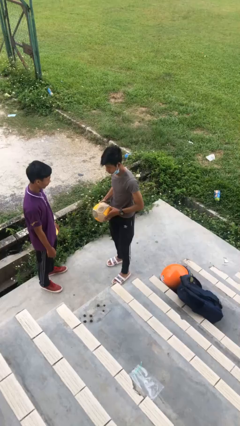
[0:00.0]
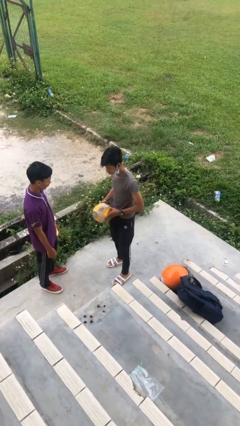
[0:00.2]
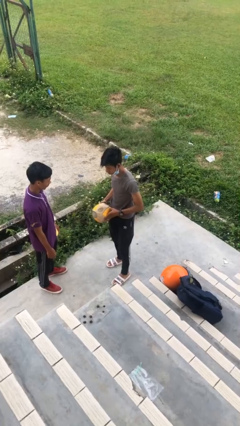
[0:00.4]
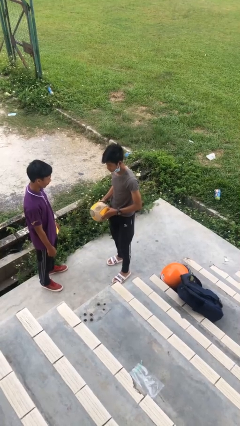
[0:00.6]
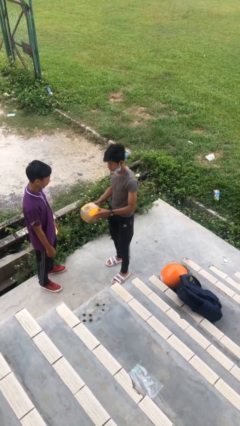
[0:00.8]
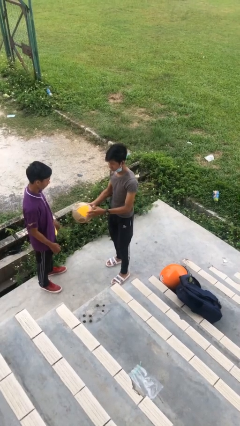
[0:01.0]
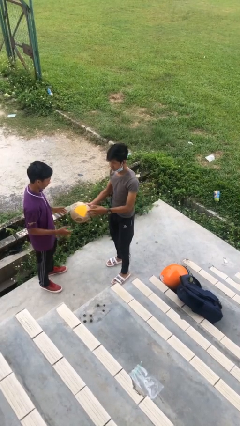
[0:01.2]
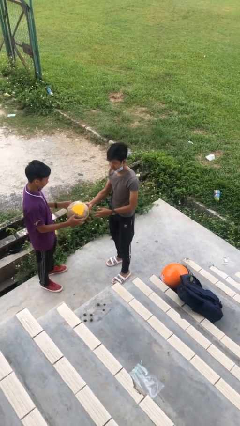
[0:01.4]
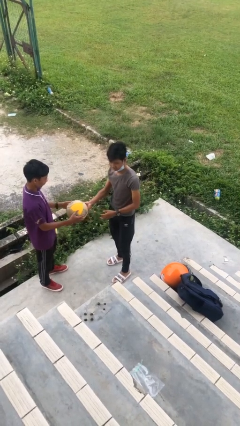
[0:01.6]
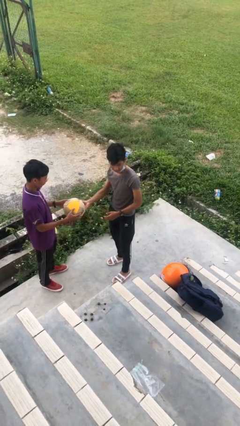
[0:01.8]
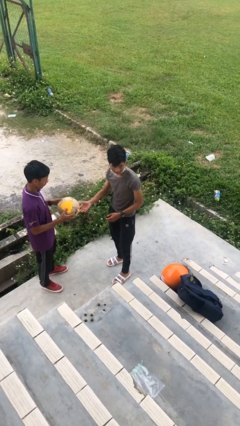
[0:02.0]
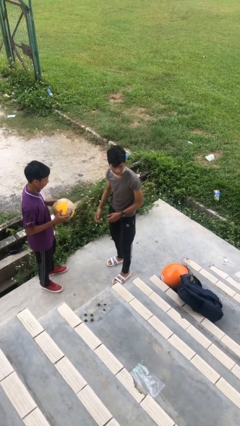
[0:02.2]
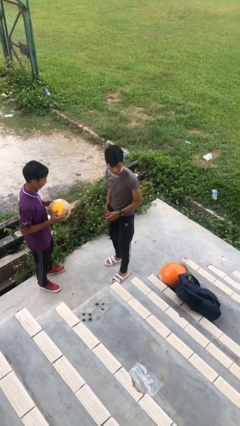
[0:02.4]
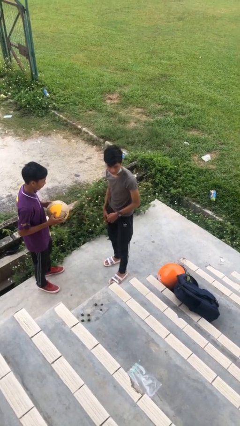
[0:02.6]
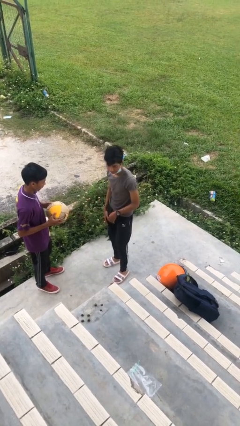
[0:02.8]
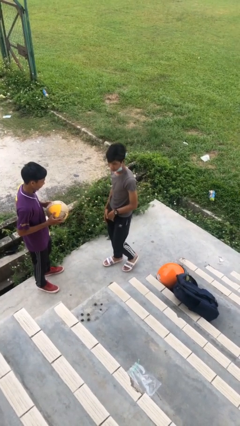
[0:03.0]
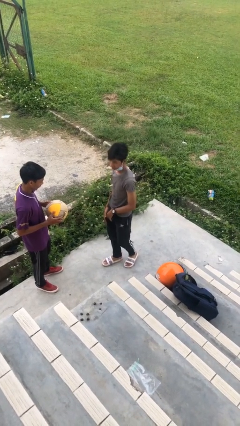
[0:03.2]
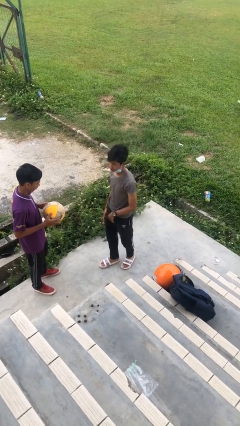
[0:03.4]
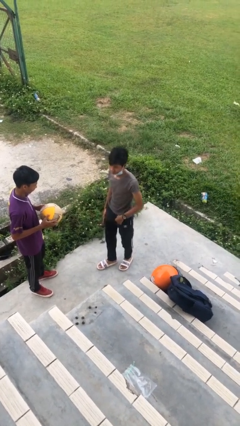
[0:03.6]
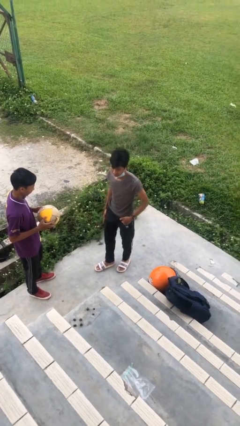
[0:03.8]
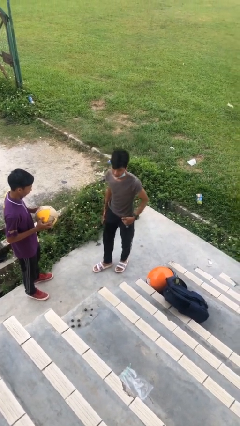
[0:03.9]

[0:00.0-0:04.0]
person transfers object to person

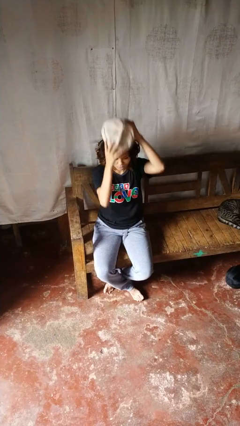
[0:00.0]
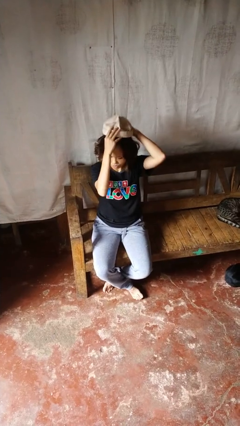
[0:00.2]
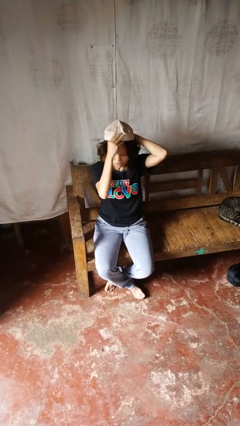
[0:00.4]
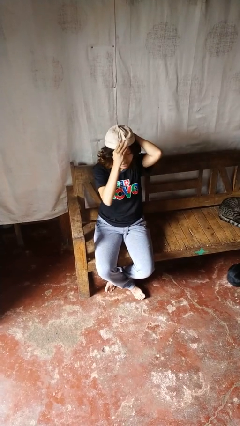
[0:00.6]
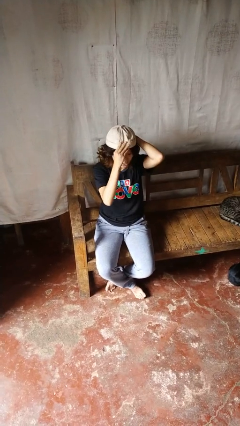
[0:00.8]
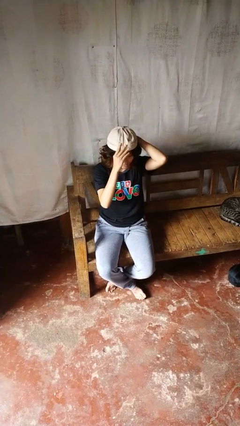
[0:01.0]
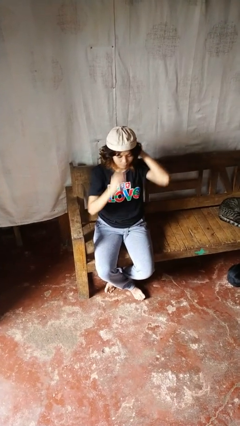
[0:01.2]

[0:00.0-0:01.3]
person puts on hat

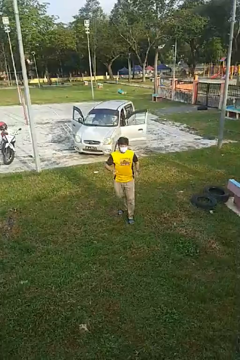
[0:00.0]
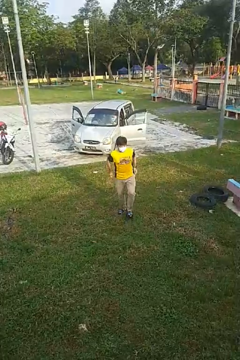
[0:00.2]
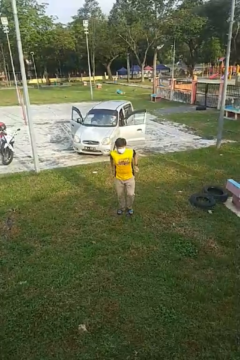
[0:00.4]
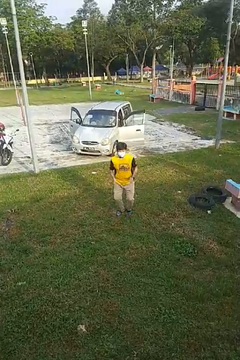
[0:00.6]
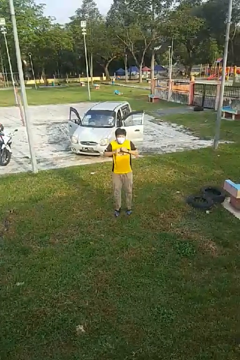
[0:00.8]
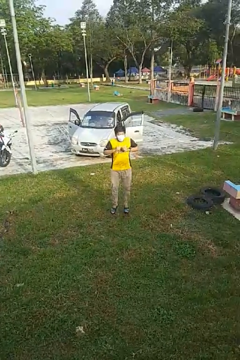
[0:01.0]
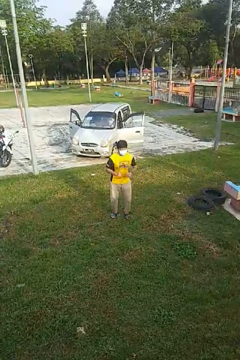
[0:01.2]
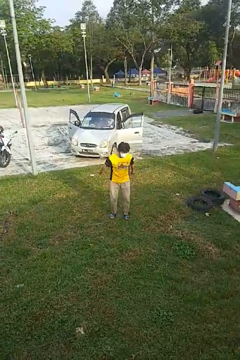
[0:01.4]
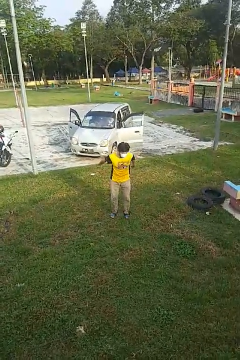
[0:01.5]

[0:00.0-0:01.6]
person jumps

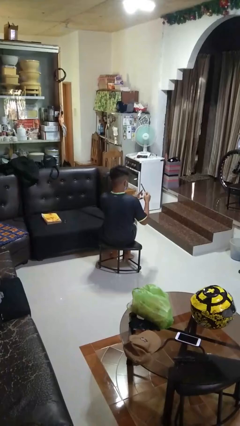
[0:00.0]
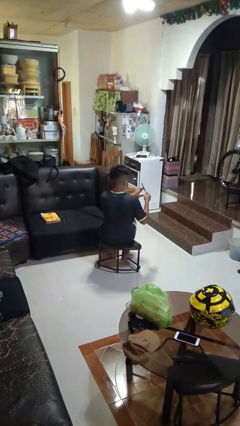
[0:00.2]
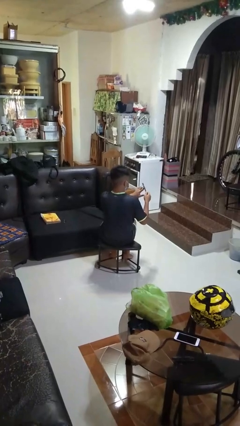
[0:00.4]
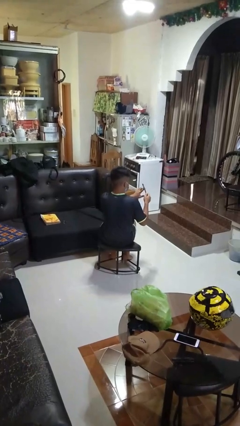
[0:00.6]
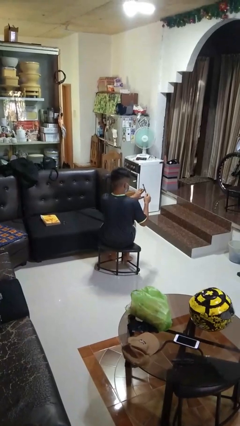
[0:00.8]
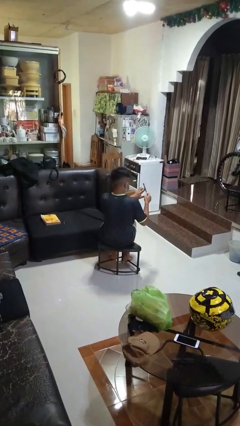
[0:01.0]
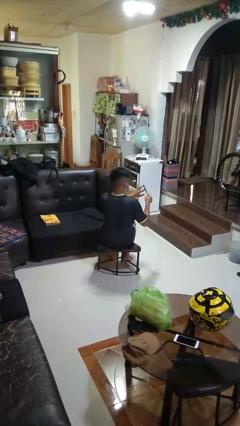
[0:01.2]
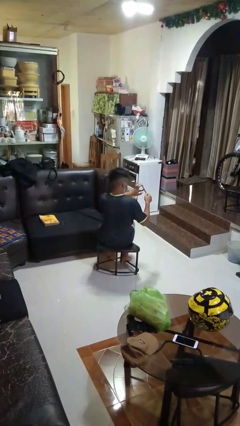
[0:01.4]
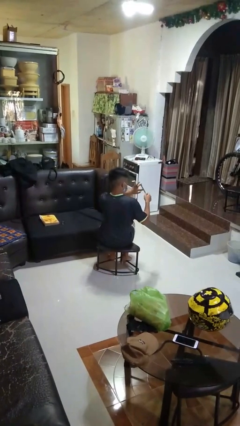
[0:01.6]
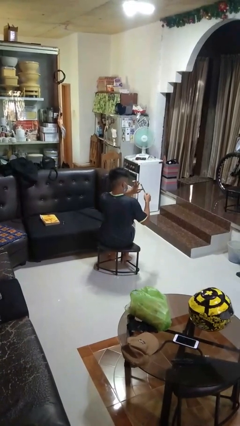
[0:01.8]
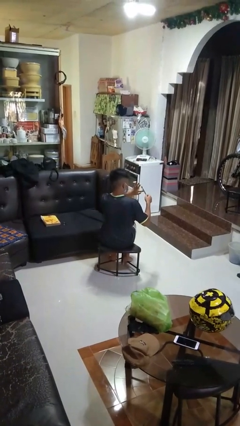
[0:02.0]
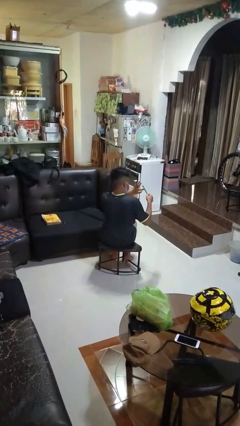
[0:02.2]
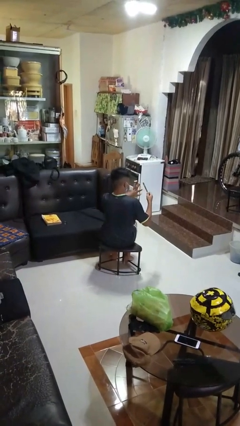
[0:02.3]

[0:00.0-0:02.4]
person files fingernails

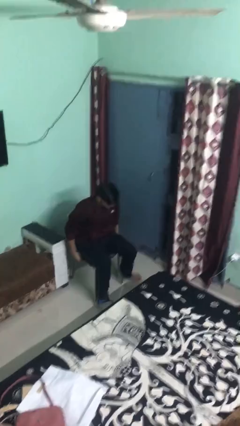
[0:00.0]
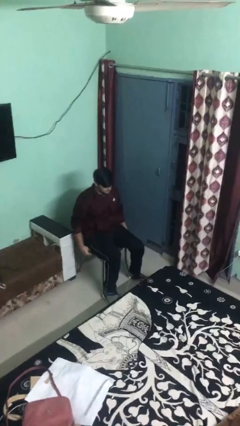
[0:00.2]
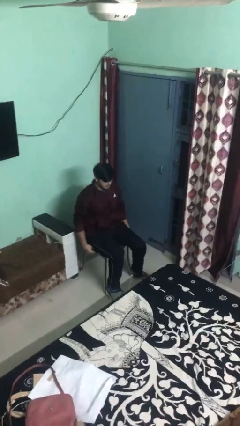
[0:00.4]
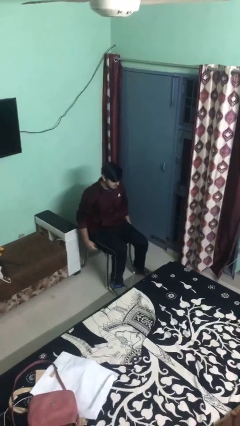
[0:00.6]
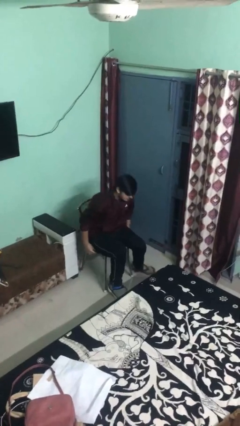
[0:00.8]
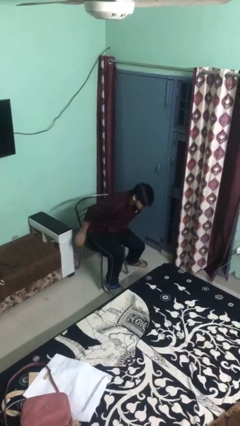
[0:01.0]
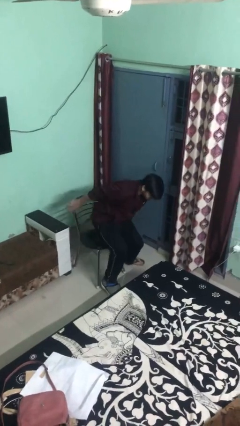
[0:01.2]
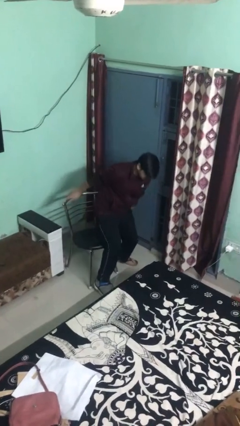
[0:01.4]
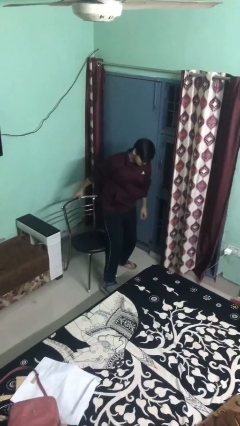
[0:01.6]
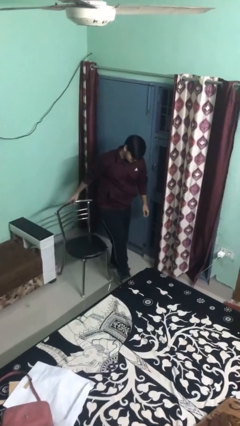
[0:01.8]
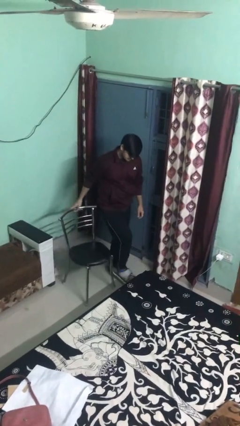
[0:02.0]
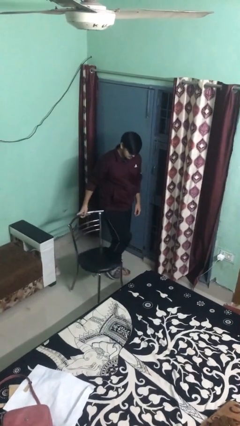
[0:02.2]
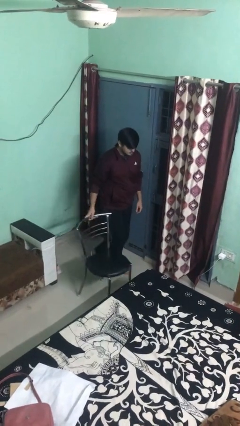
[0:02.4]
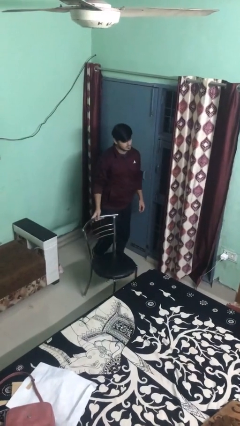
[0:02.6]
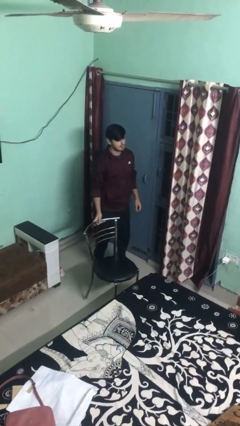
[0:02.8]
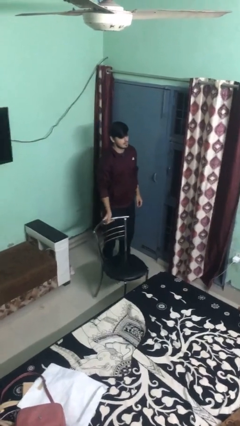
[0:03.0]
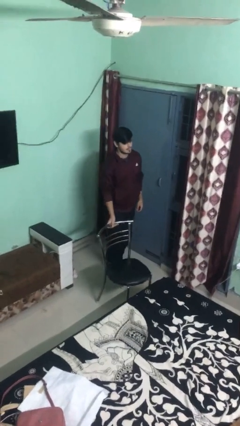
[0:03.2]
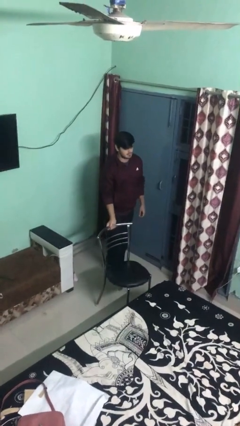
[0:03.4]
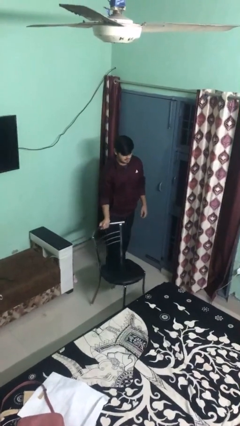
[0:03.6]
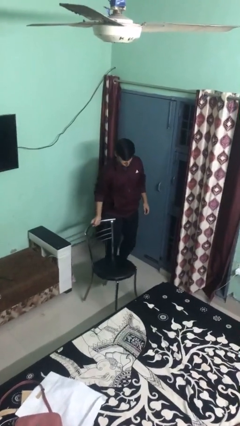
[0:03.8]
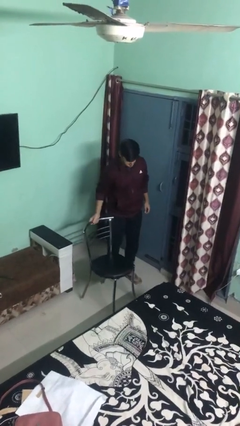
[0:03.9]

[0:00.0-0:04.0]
person stands up

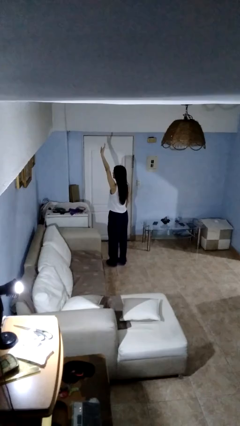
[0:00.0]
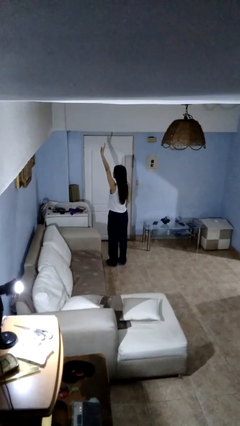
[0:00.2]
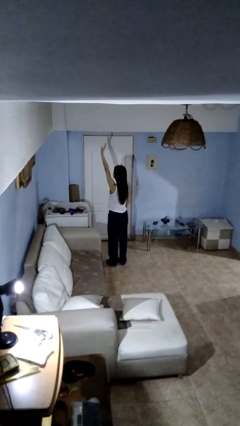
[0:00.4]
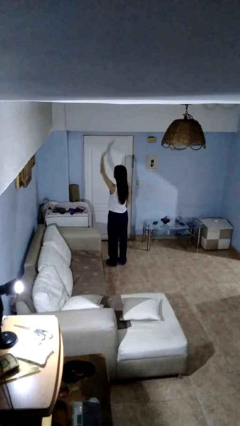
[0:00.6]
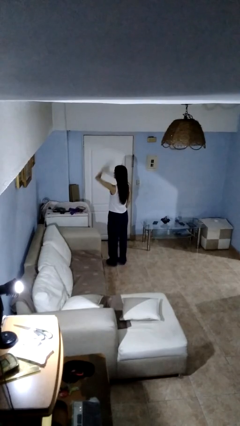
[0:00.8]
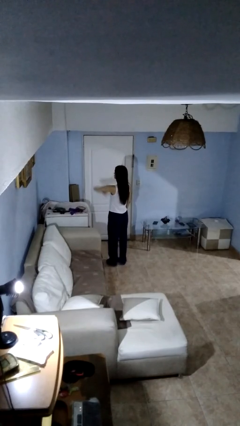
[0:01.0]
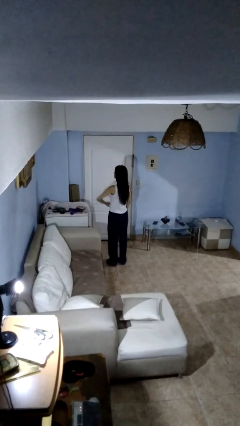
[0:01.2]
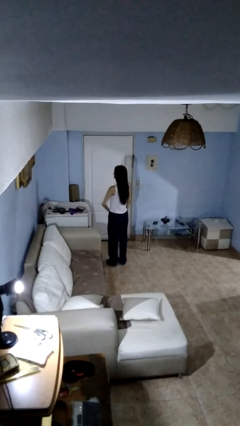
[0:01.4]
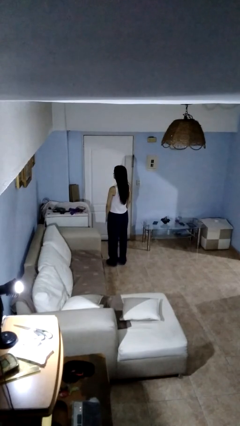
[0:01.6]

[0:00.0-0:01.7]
person gestures swipe down

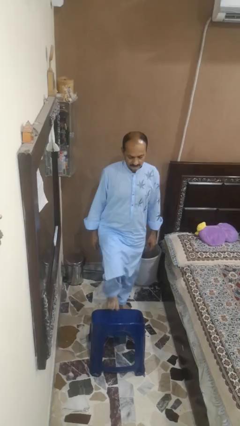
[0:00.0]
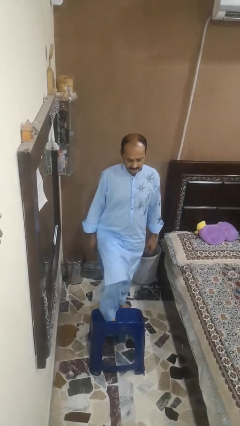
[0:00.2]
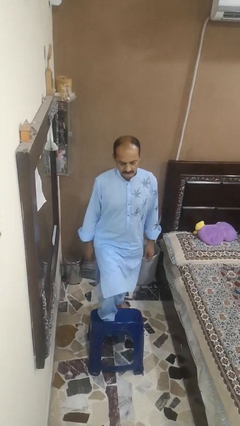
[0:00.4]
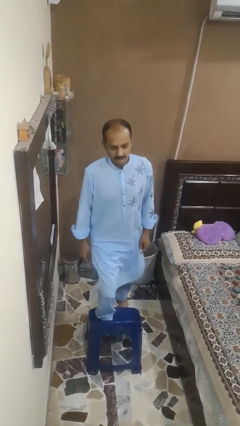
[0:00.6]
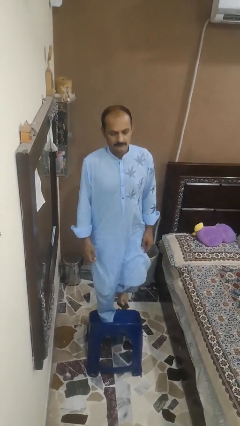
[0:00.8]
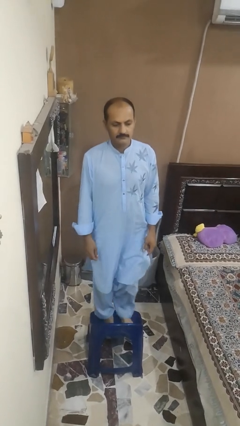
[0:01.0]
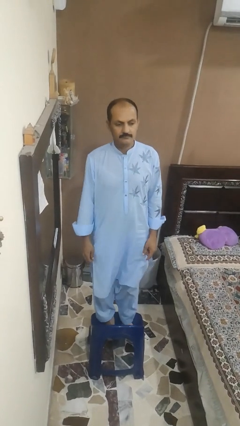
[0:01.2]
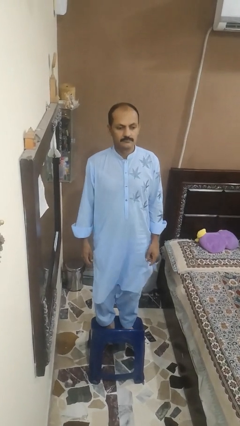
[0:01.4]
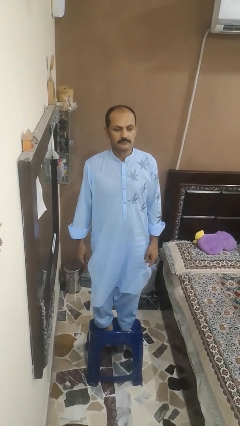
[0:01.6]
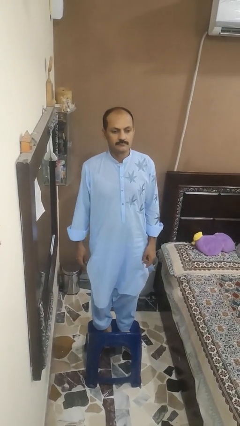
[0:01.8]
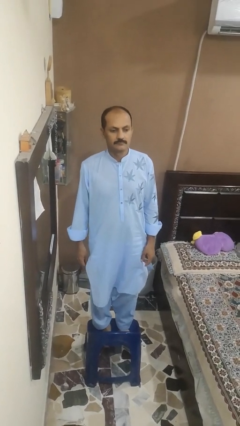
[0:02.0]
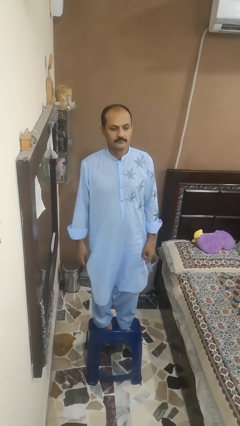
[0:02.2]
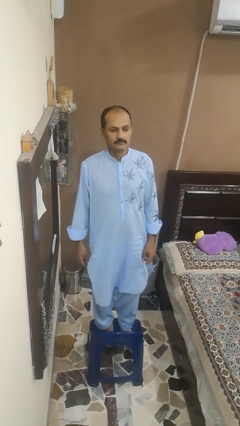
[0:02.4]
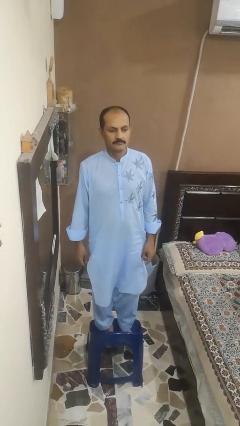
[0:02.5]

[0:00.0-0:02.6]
person climbs on chair
